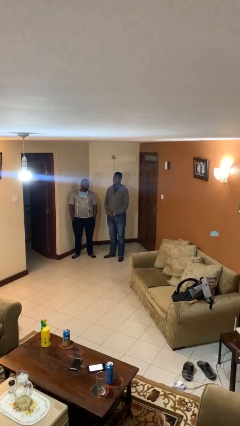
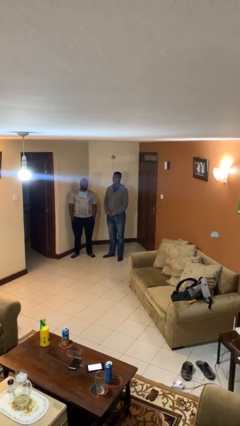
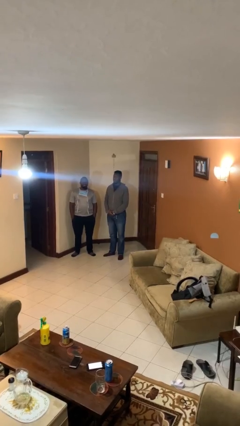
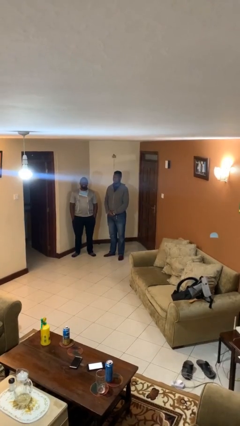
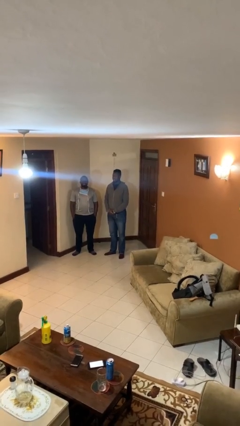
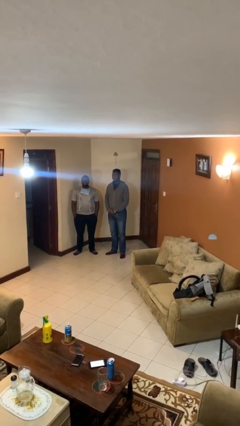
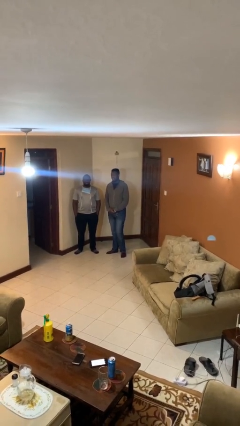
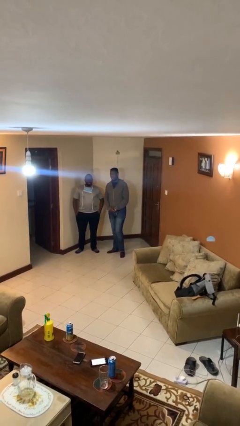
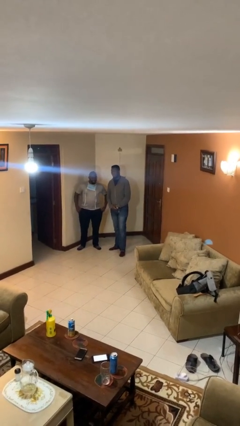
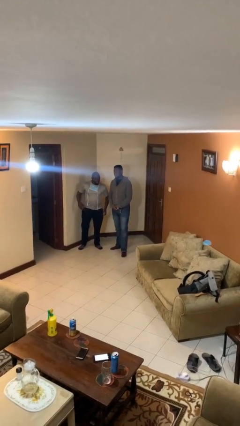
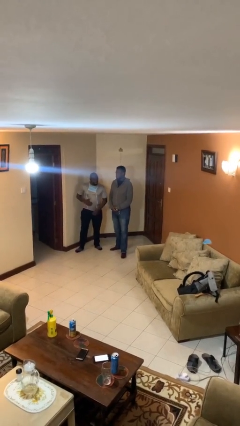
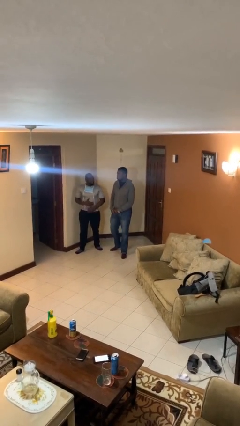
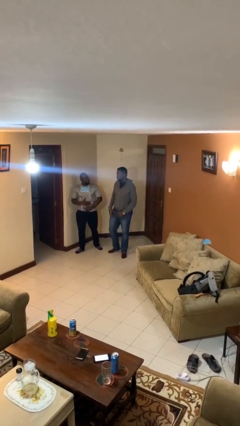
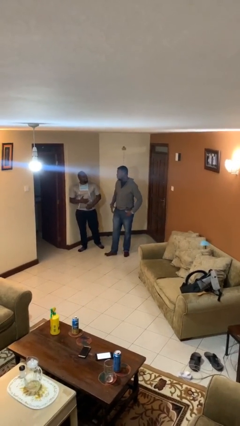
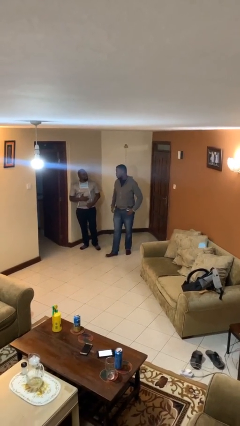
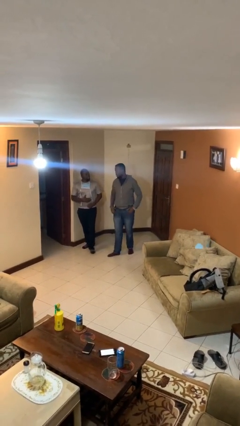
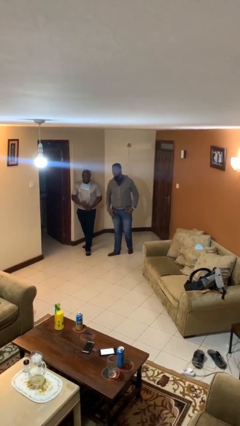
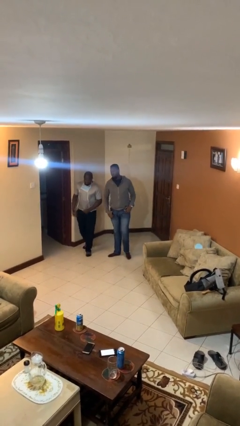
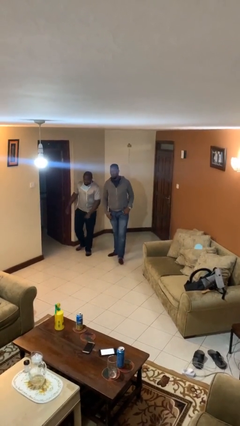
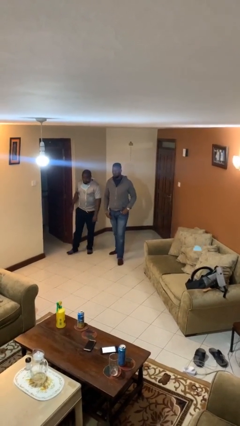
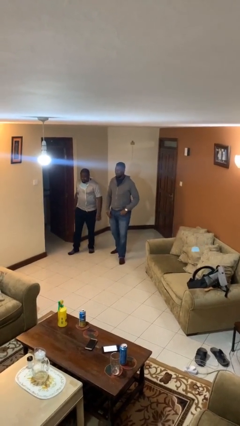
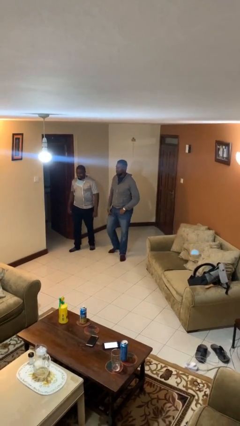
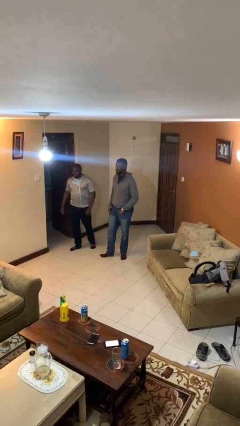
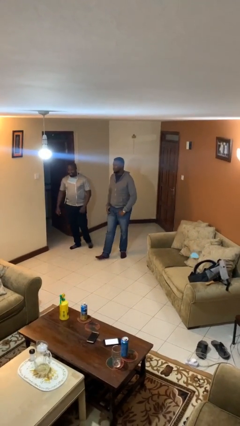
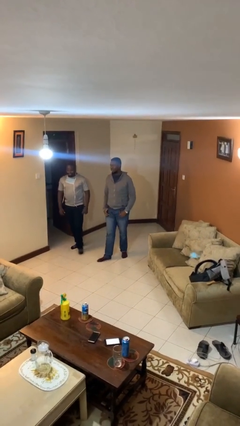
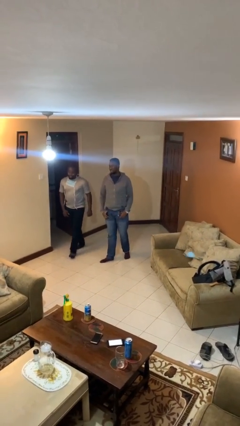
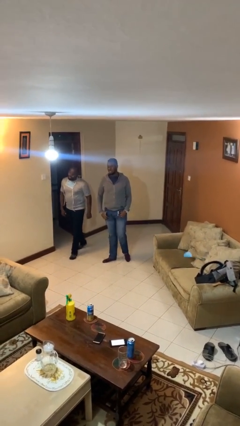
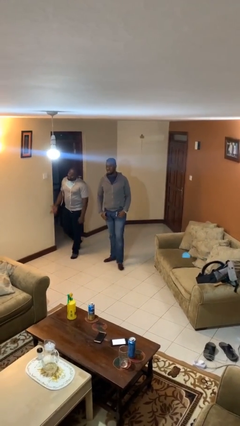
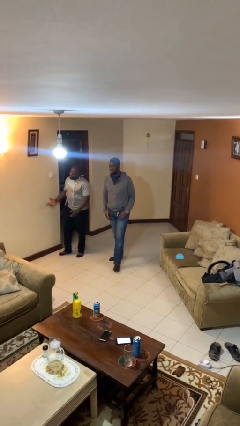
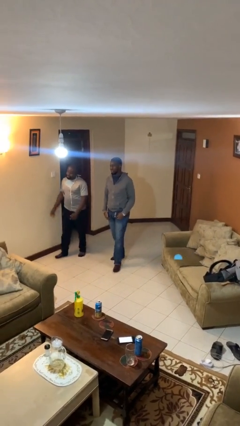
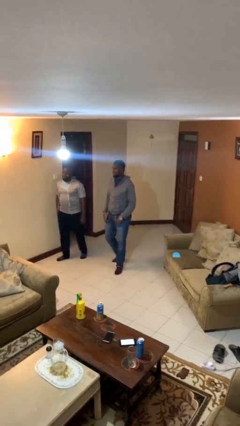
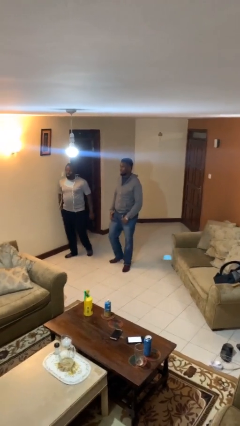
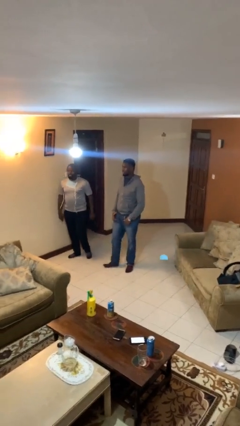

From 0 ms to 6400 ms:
person talks to person

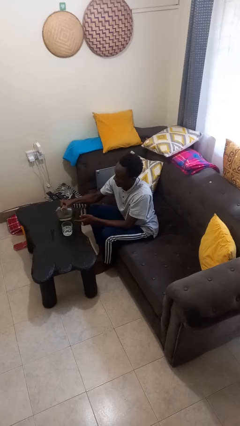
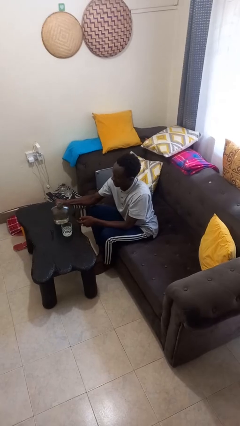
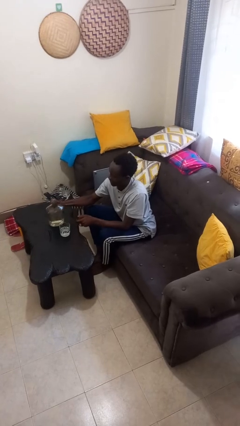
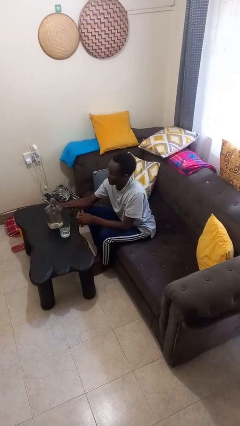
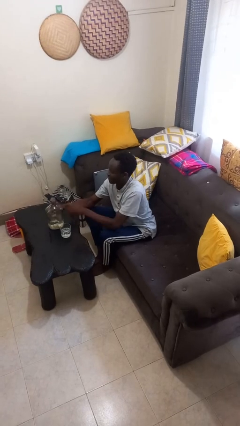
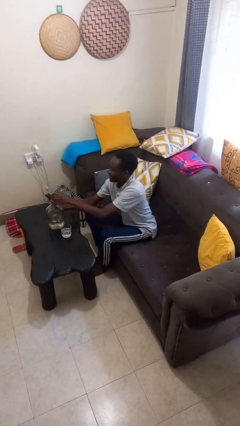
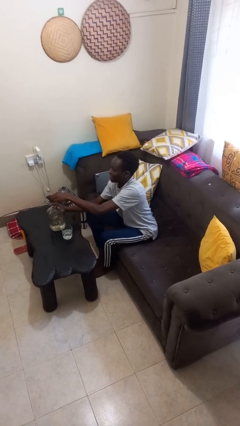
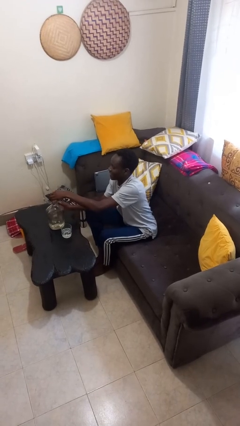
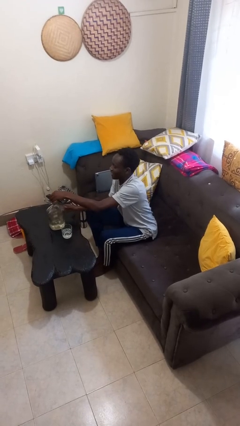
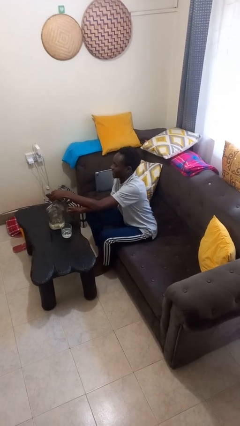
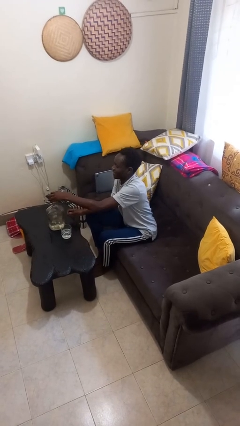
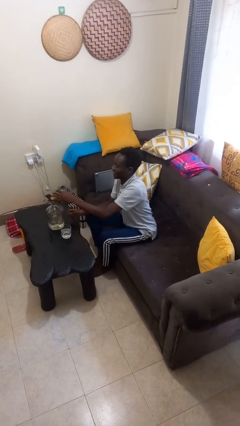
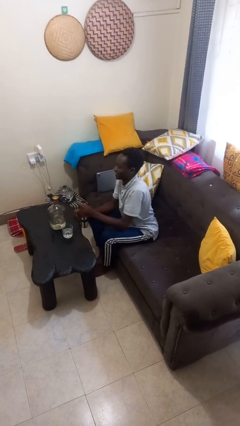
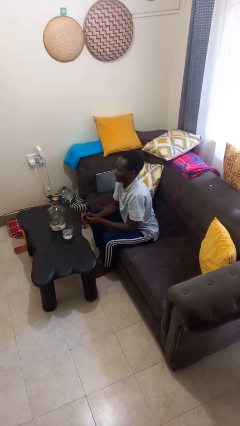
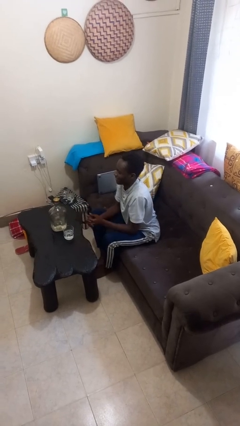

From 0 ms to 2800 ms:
person screws lid to bottle

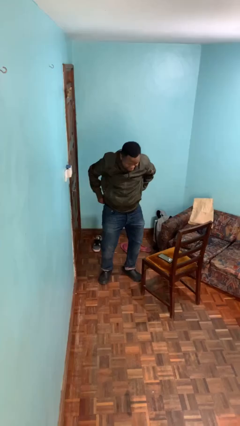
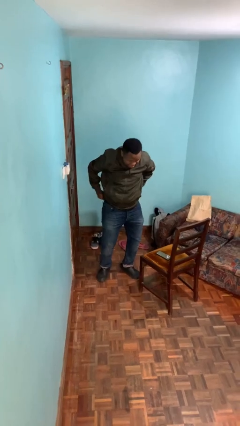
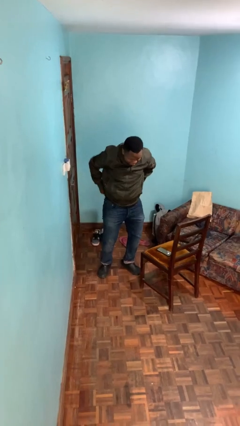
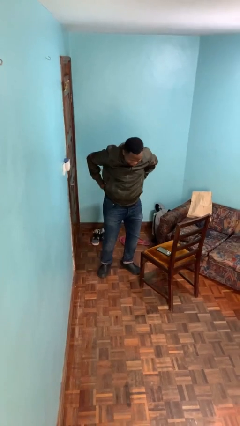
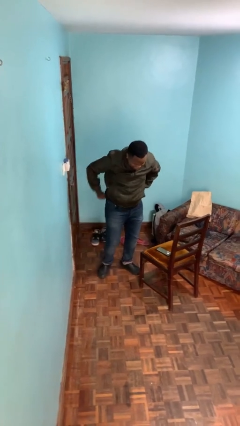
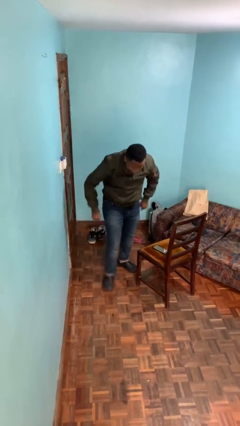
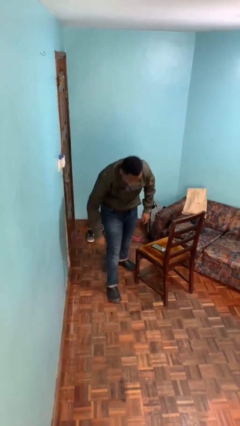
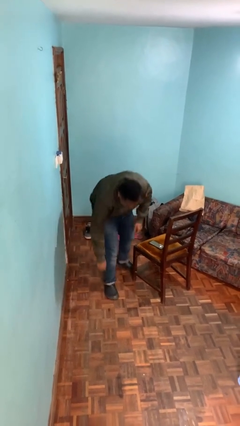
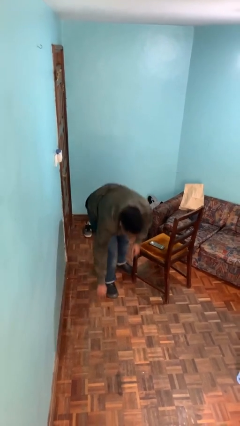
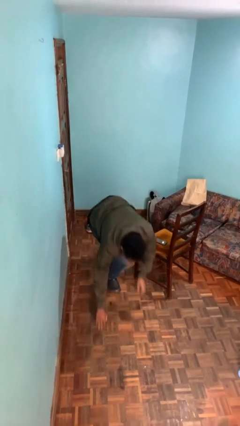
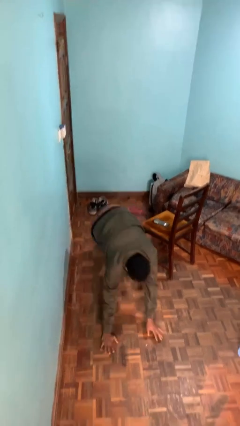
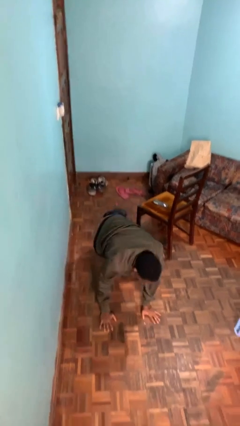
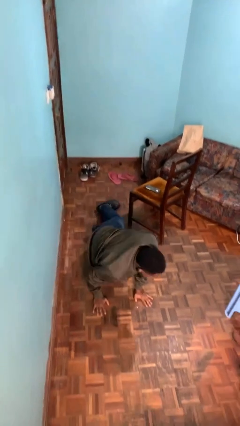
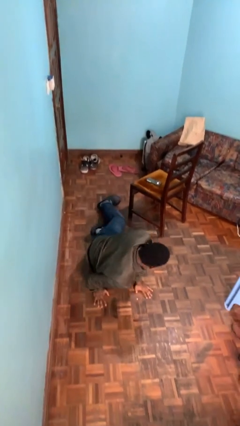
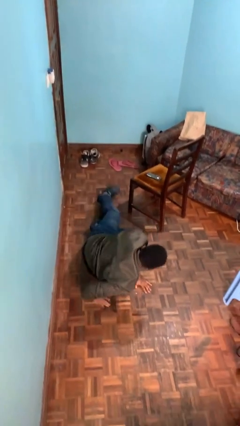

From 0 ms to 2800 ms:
person trips on object on floor

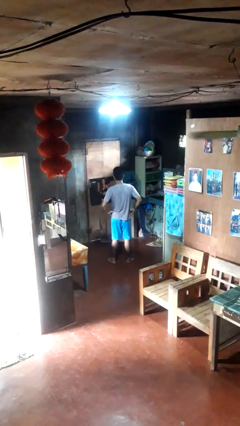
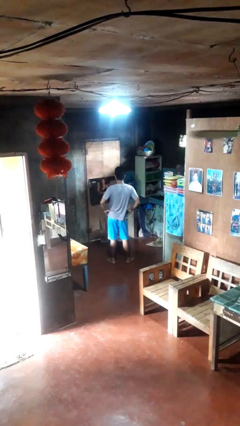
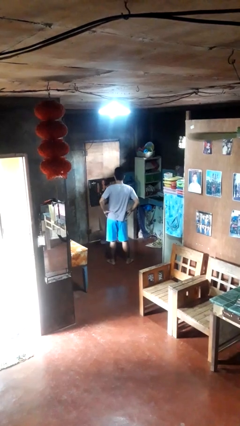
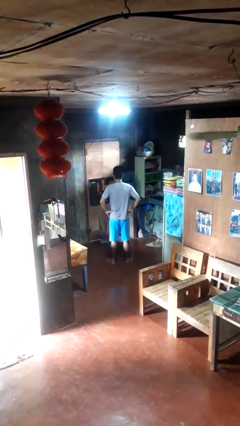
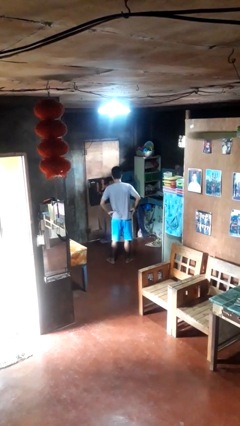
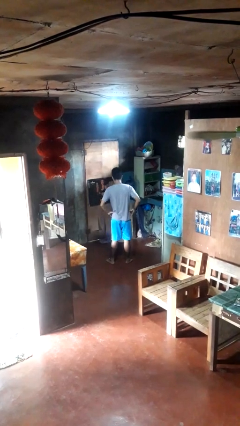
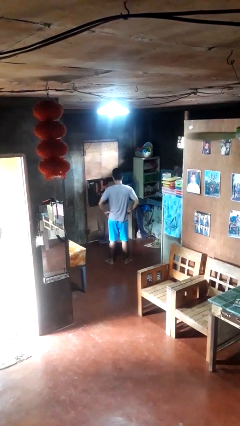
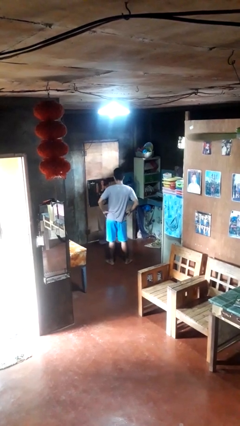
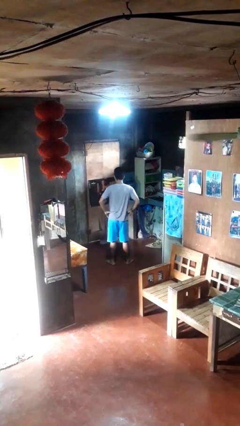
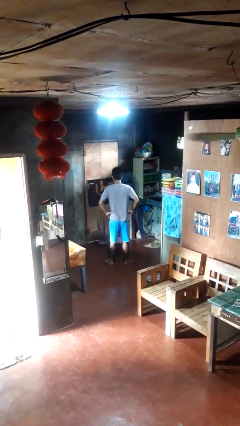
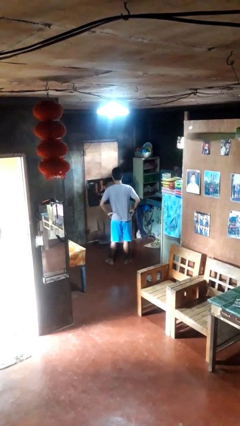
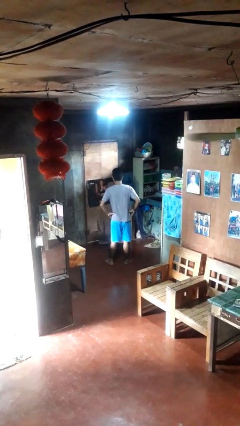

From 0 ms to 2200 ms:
person wiggles hips

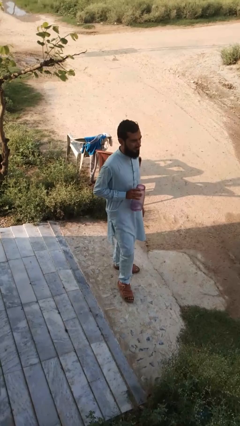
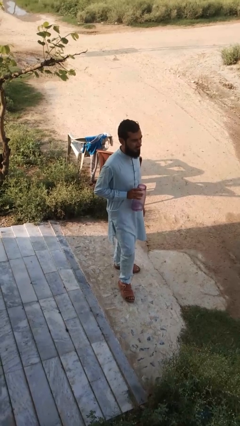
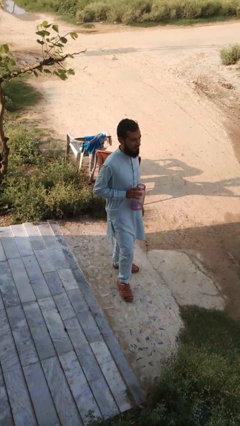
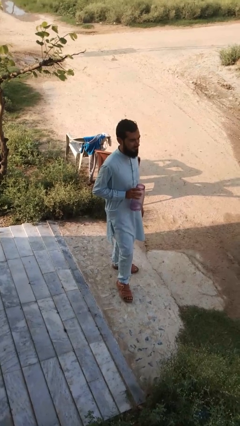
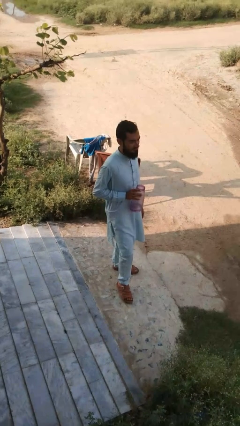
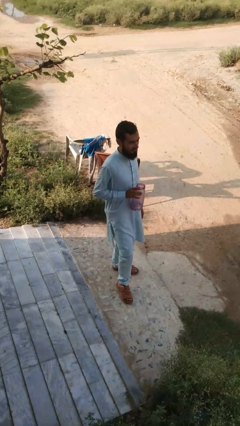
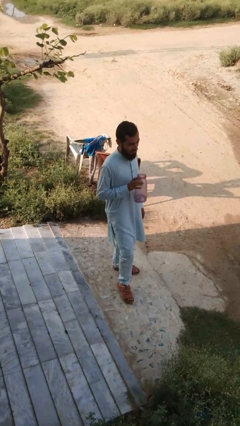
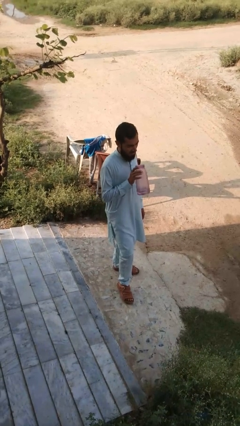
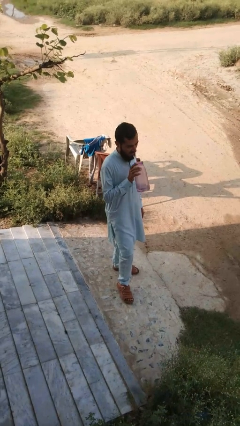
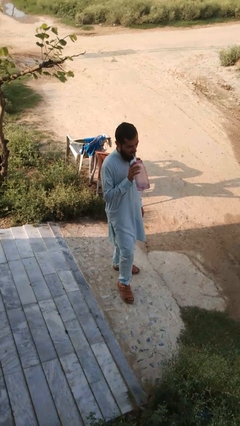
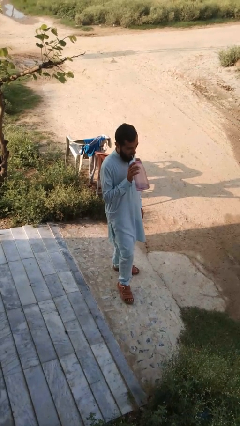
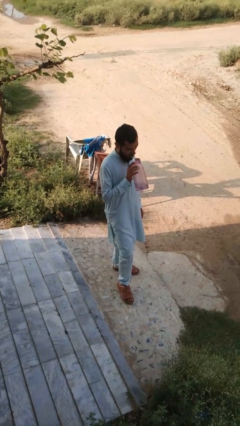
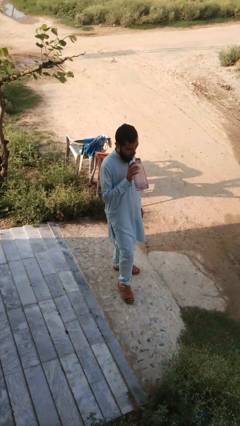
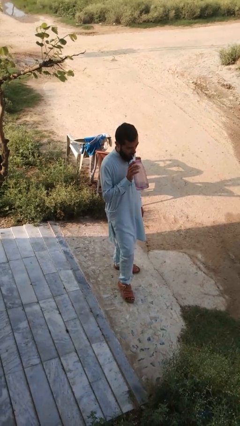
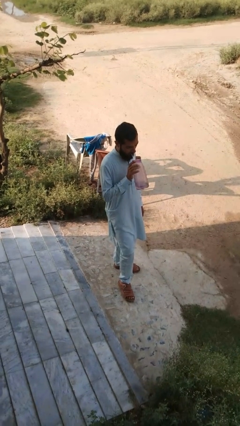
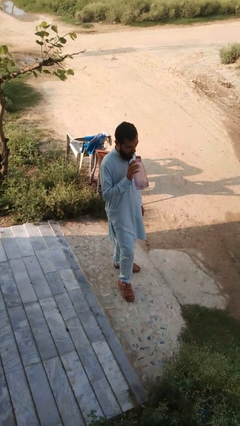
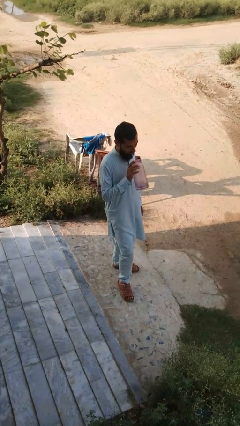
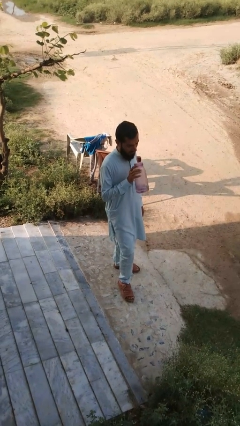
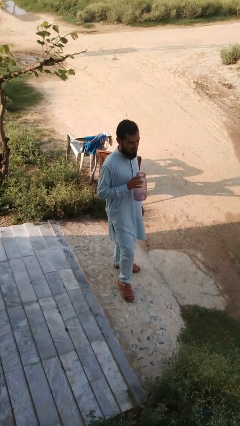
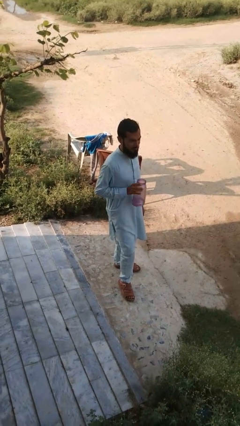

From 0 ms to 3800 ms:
person drinks from straw
